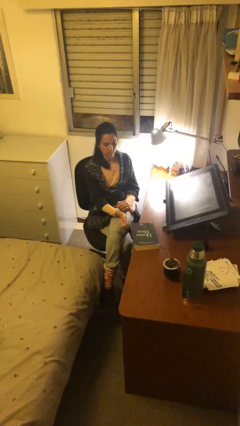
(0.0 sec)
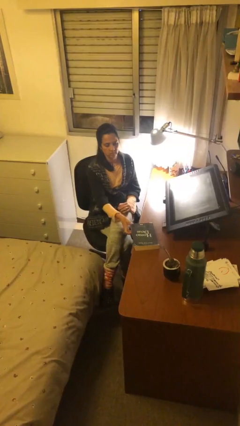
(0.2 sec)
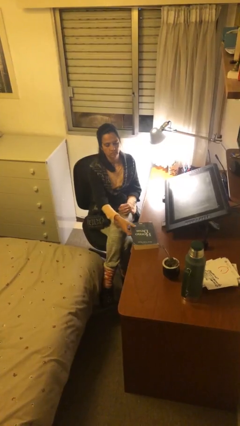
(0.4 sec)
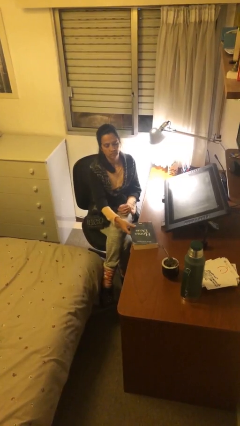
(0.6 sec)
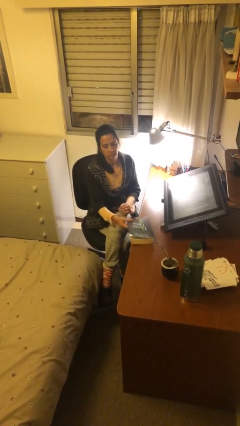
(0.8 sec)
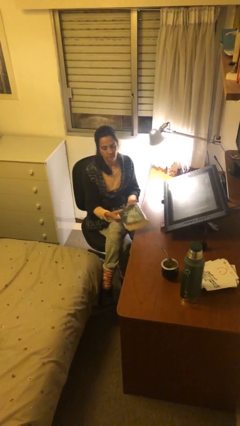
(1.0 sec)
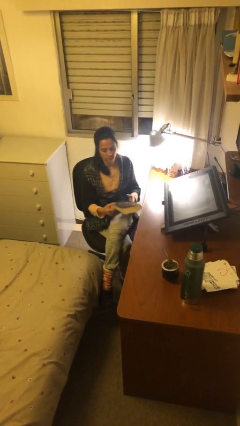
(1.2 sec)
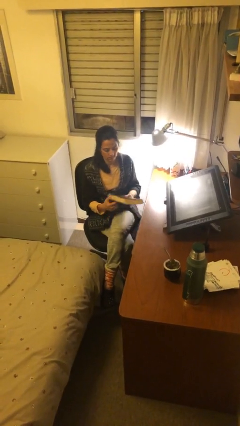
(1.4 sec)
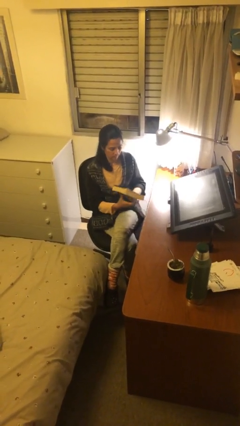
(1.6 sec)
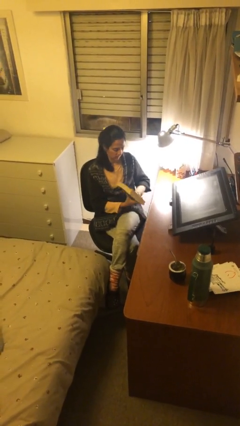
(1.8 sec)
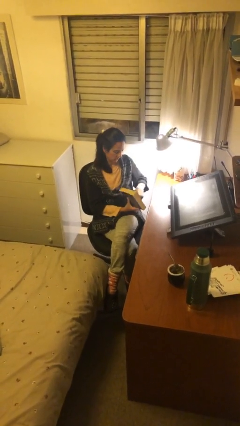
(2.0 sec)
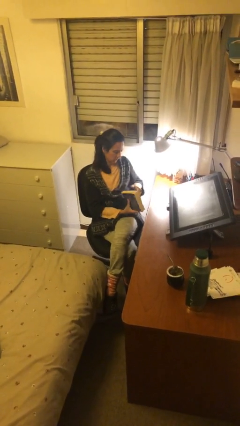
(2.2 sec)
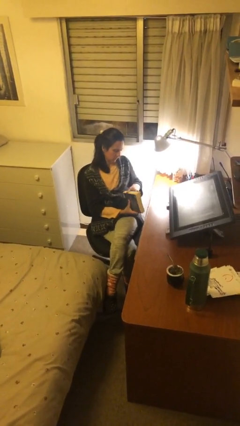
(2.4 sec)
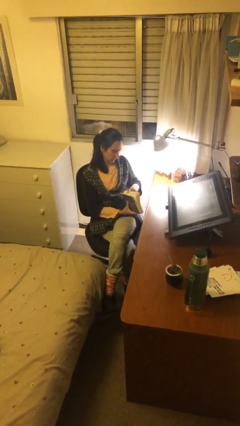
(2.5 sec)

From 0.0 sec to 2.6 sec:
person picks up object from table

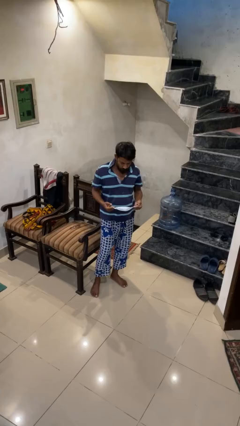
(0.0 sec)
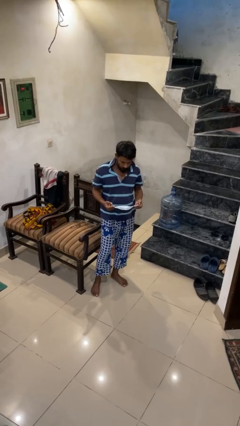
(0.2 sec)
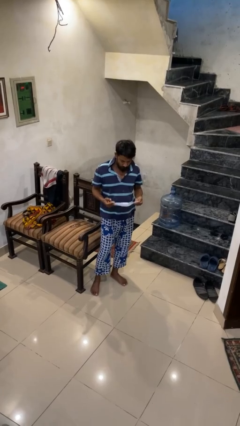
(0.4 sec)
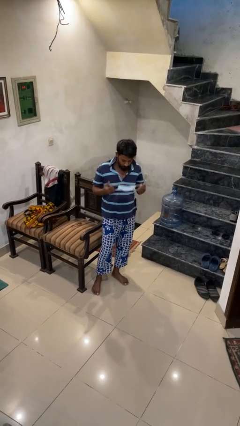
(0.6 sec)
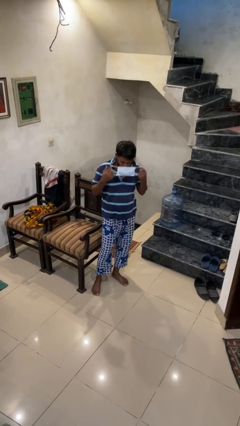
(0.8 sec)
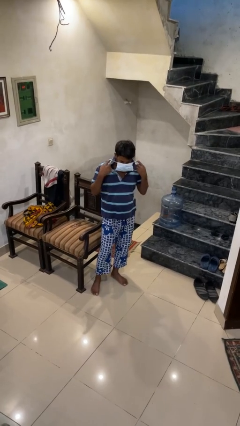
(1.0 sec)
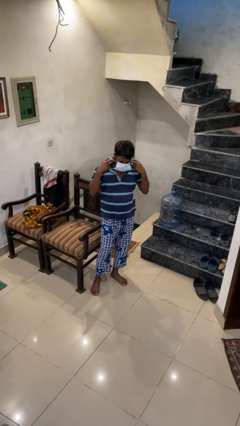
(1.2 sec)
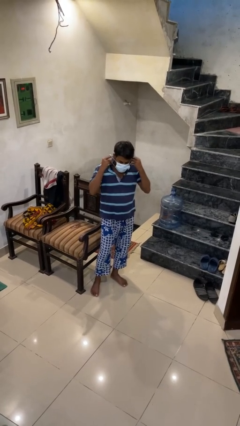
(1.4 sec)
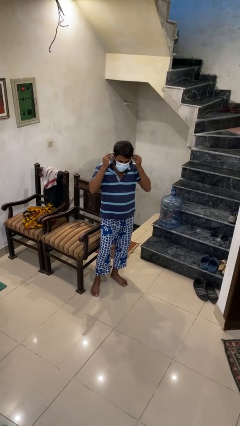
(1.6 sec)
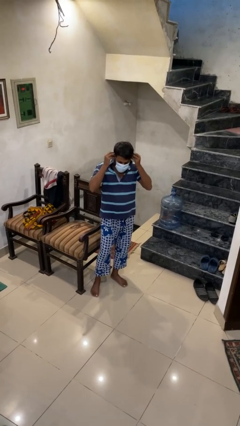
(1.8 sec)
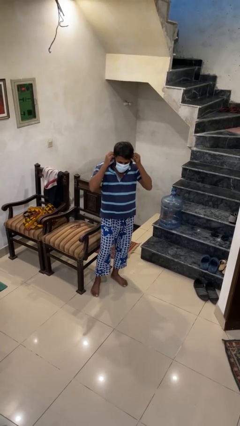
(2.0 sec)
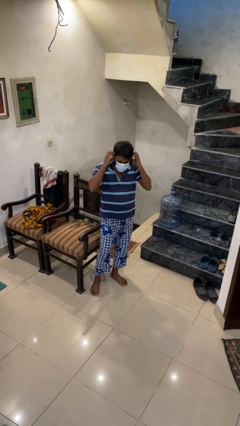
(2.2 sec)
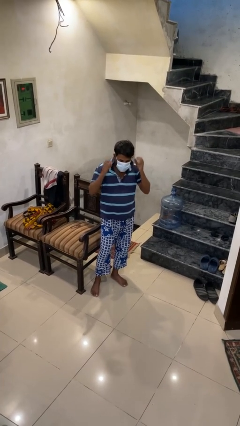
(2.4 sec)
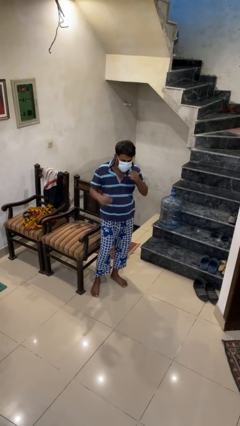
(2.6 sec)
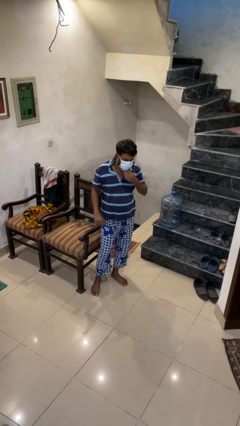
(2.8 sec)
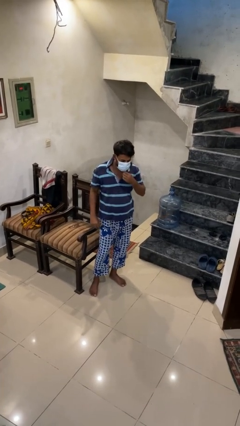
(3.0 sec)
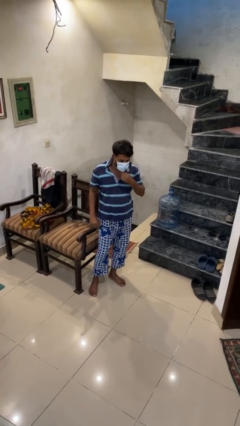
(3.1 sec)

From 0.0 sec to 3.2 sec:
person puts on facemask

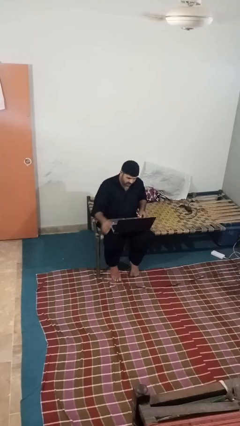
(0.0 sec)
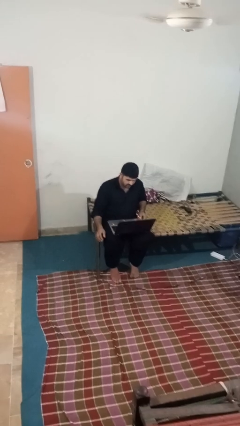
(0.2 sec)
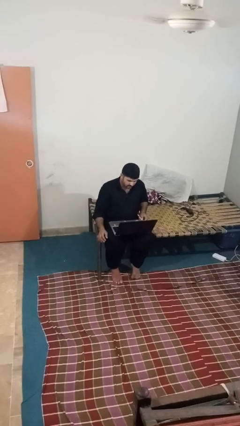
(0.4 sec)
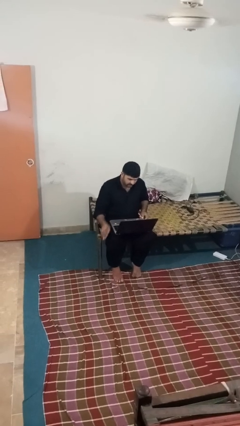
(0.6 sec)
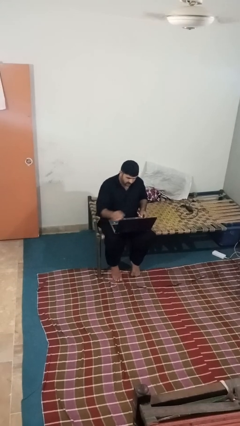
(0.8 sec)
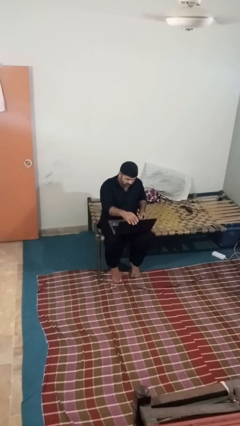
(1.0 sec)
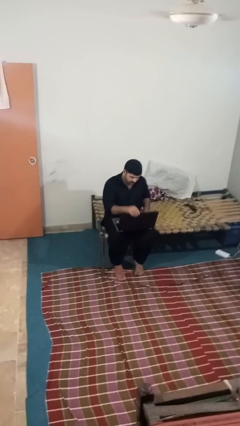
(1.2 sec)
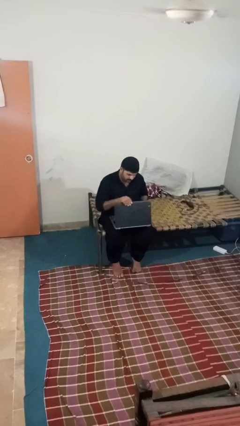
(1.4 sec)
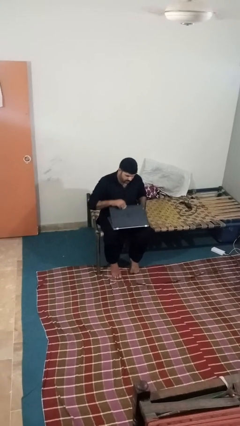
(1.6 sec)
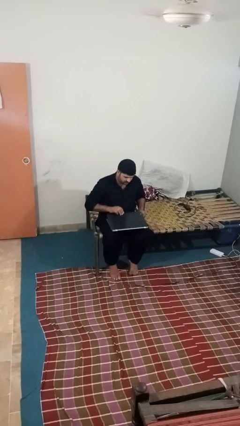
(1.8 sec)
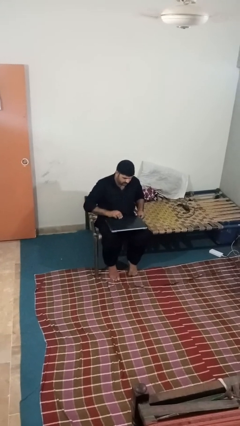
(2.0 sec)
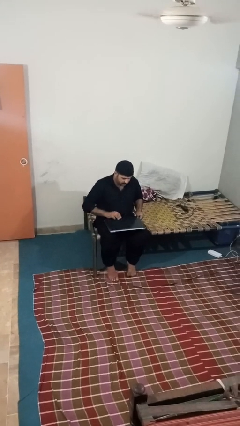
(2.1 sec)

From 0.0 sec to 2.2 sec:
person closes laptop

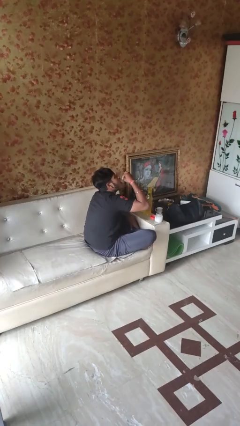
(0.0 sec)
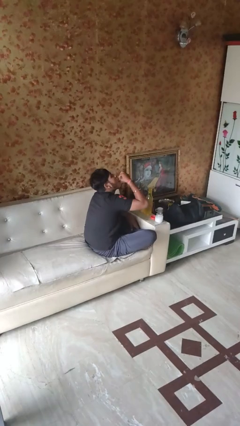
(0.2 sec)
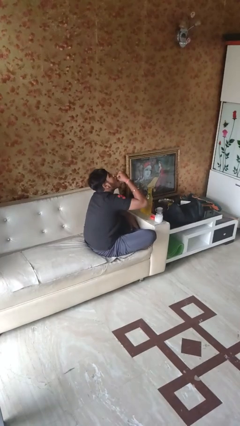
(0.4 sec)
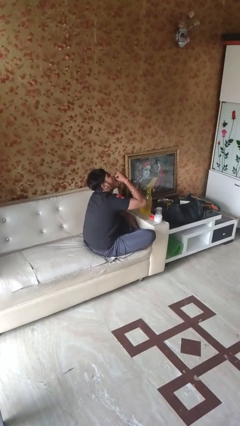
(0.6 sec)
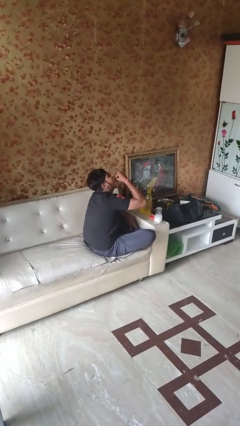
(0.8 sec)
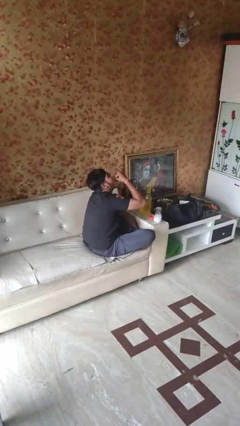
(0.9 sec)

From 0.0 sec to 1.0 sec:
person takes medicine pills

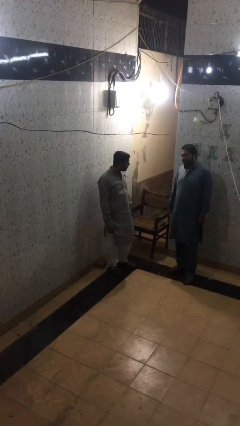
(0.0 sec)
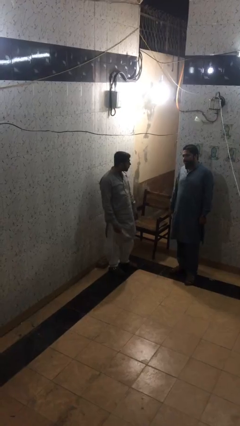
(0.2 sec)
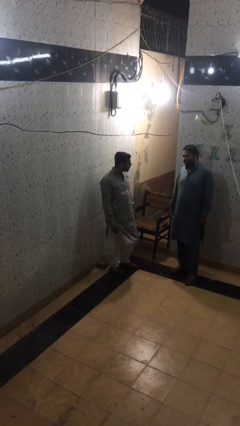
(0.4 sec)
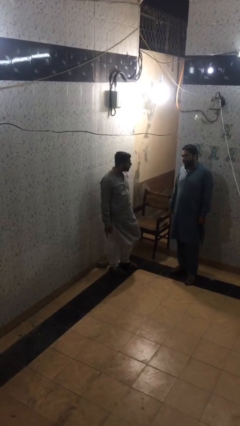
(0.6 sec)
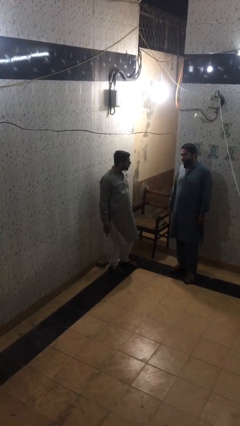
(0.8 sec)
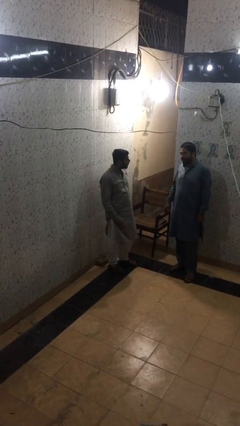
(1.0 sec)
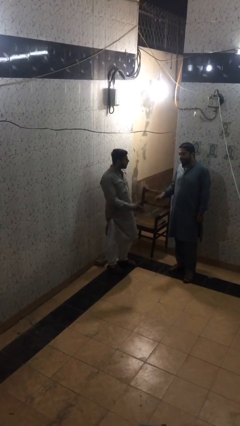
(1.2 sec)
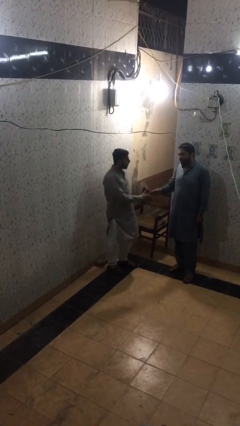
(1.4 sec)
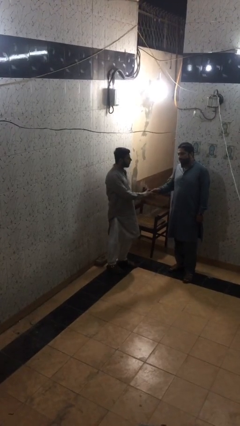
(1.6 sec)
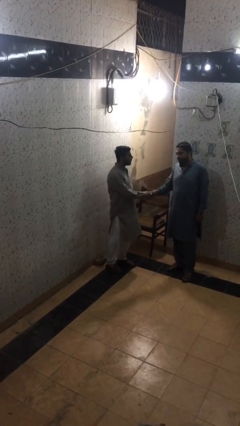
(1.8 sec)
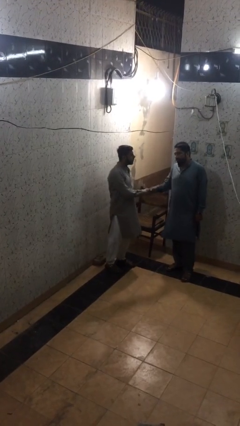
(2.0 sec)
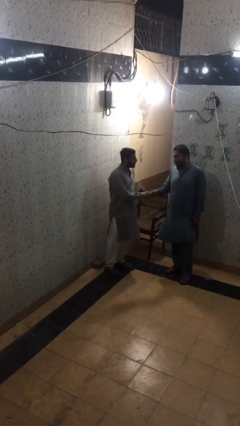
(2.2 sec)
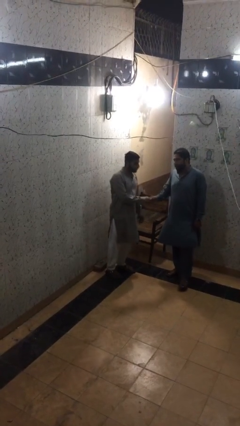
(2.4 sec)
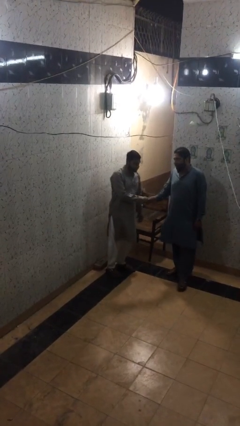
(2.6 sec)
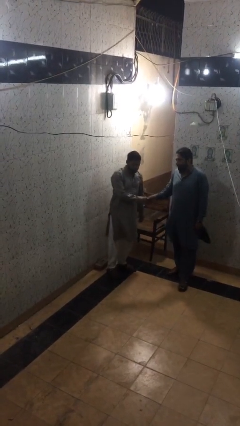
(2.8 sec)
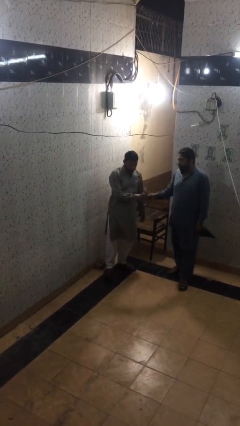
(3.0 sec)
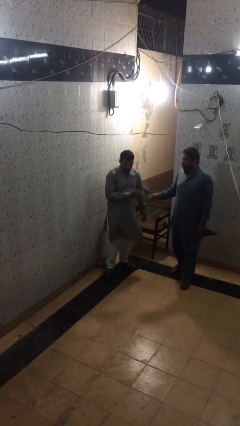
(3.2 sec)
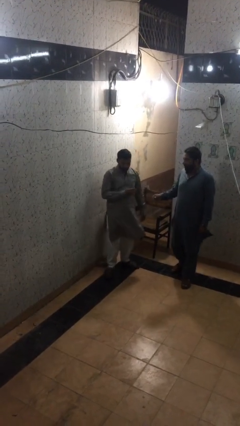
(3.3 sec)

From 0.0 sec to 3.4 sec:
person shakes hand

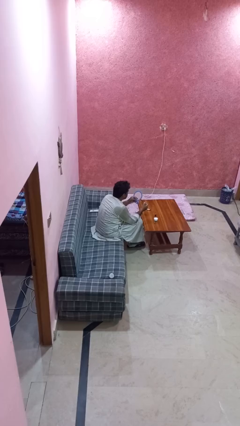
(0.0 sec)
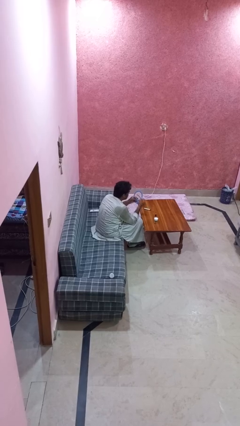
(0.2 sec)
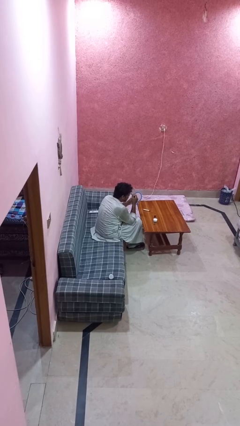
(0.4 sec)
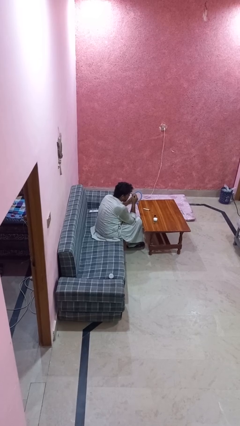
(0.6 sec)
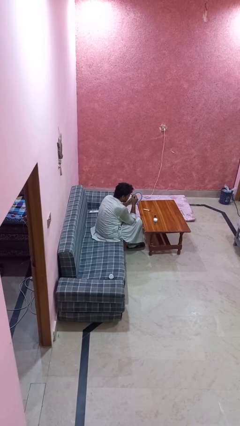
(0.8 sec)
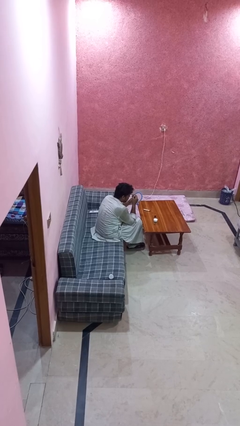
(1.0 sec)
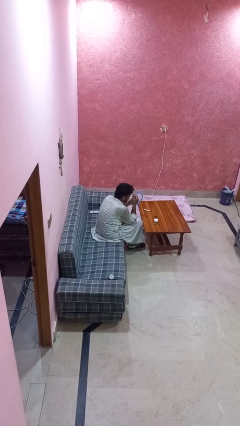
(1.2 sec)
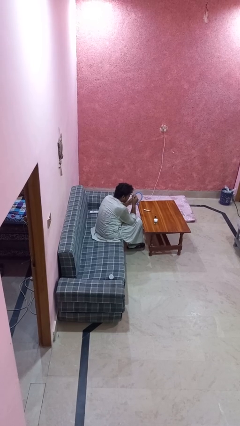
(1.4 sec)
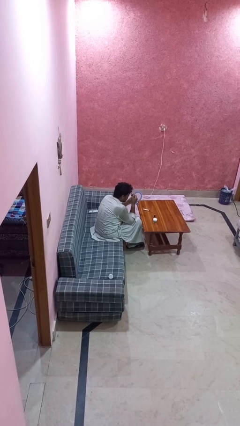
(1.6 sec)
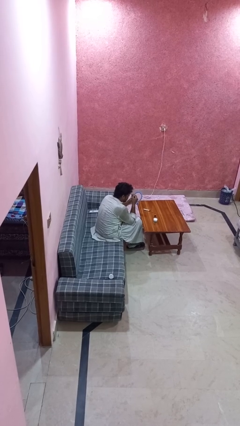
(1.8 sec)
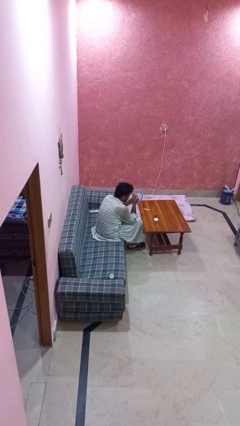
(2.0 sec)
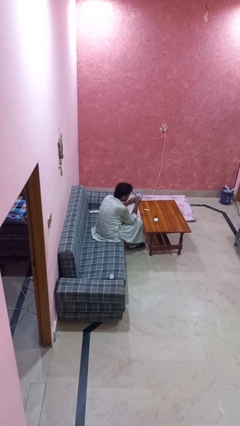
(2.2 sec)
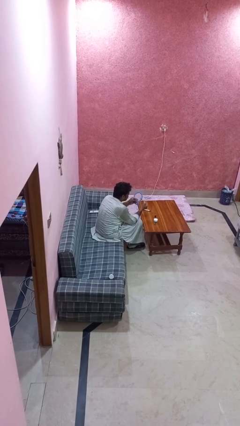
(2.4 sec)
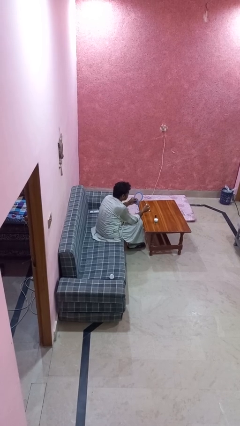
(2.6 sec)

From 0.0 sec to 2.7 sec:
person applies eye makeup

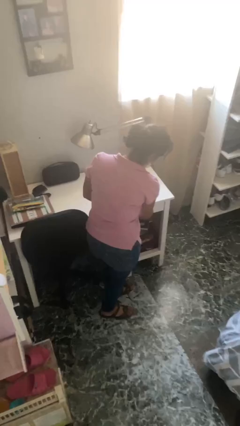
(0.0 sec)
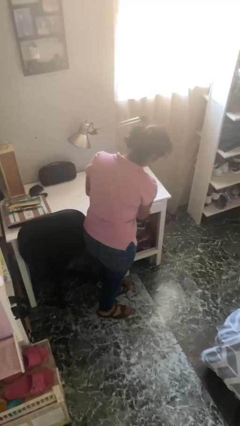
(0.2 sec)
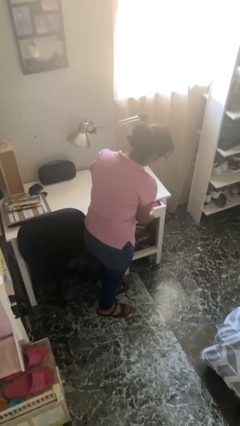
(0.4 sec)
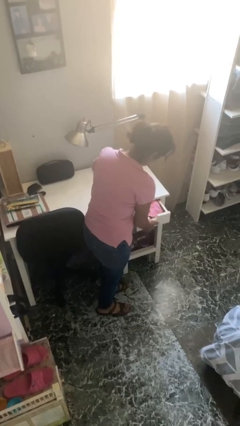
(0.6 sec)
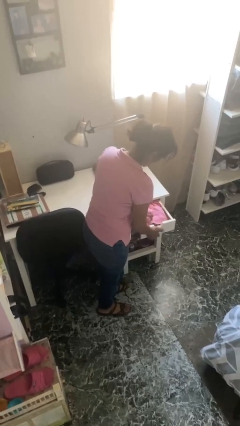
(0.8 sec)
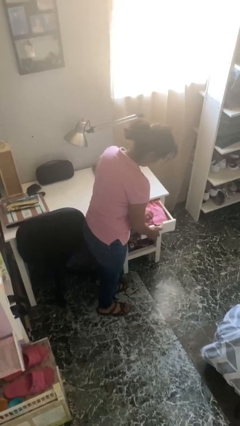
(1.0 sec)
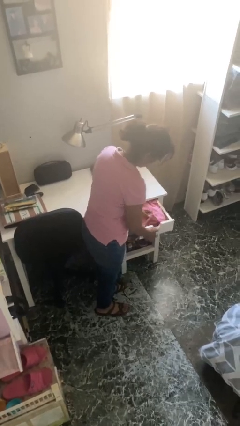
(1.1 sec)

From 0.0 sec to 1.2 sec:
person opens dresser drawer

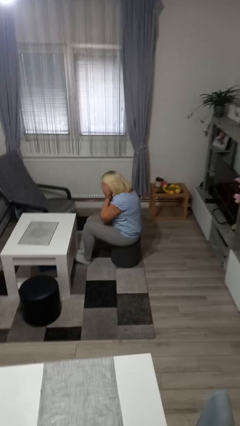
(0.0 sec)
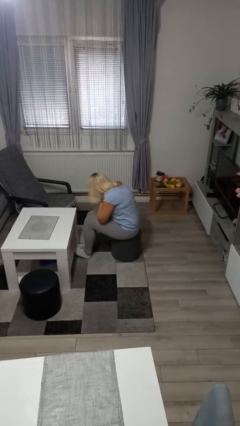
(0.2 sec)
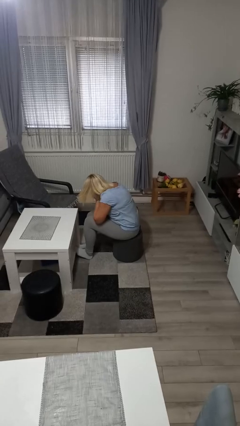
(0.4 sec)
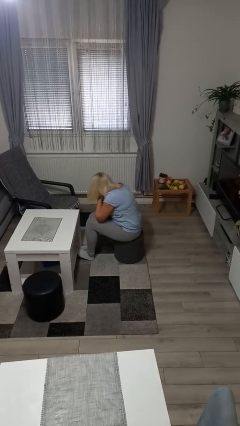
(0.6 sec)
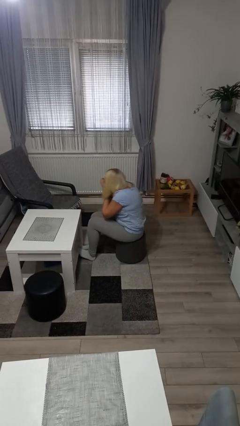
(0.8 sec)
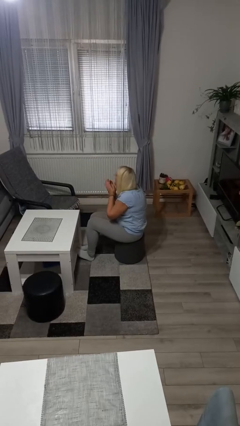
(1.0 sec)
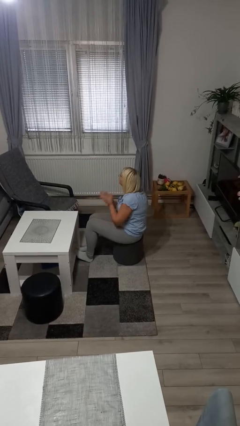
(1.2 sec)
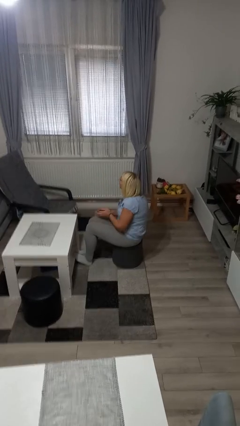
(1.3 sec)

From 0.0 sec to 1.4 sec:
person sneezes into hand
